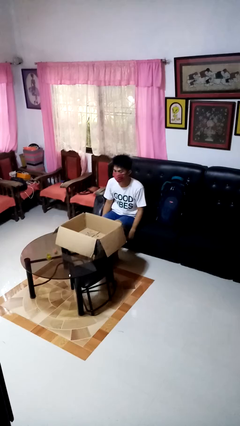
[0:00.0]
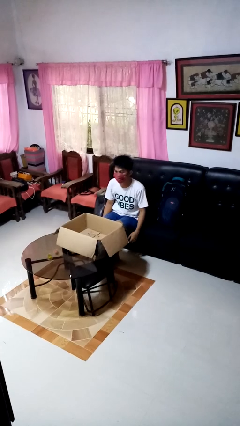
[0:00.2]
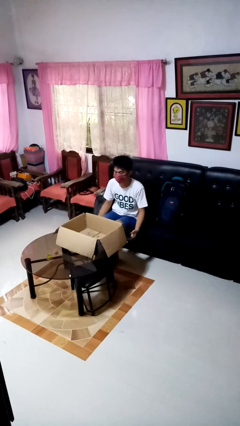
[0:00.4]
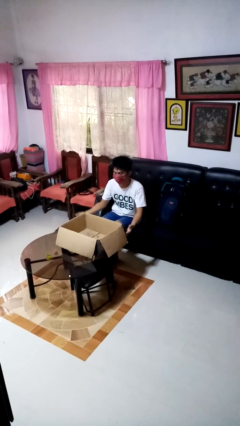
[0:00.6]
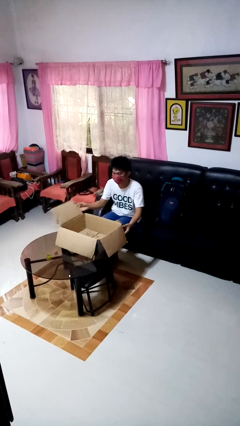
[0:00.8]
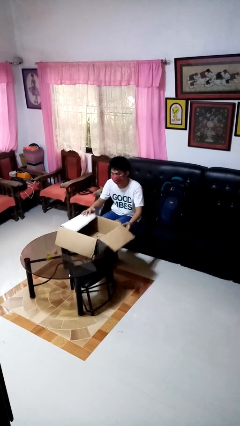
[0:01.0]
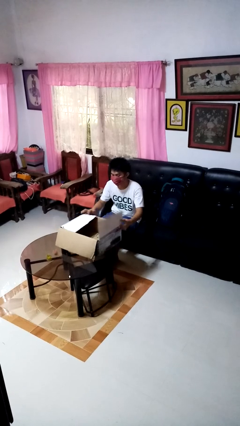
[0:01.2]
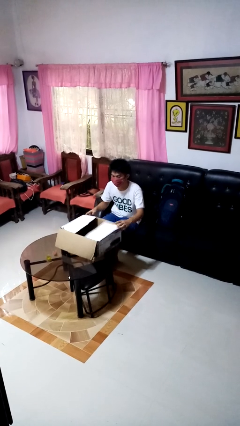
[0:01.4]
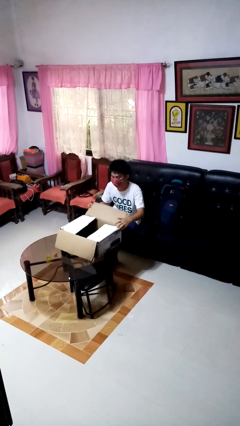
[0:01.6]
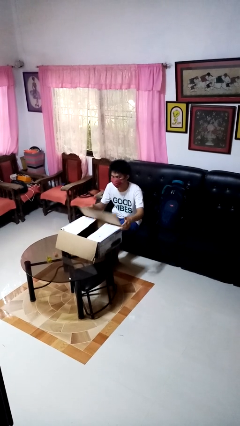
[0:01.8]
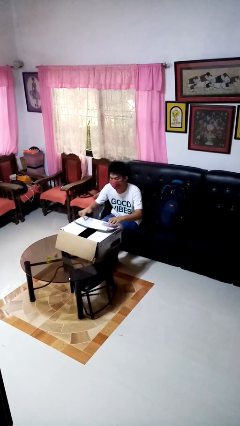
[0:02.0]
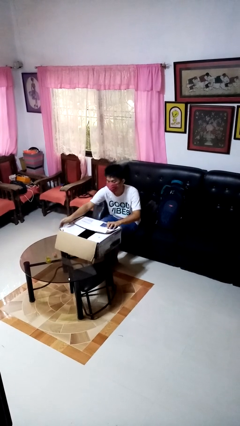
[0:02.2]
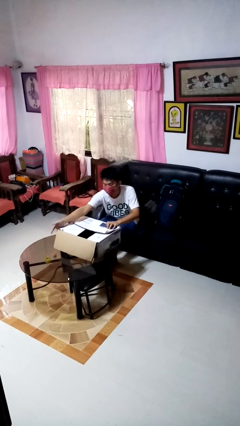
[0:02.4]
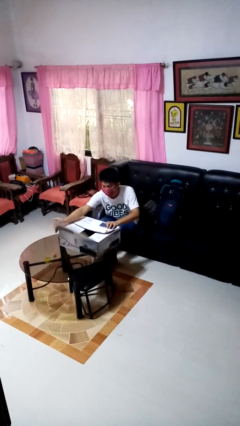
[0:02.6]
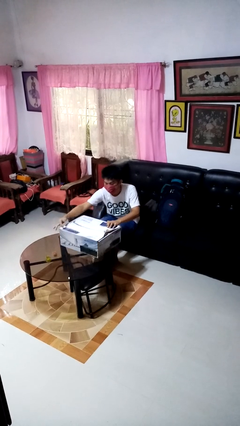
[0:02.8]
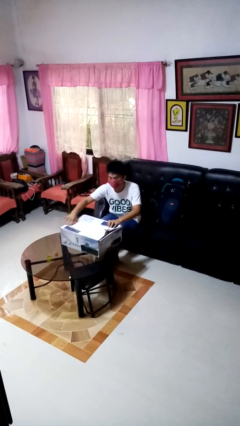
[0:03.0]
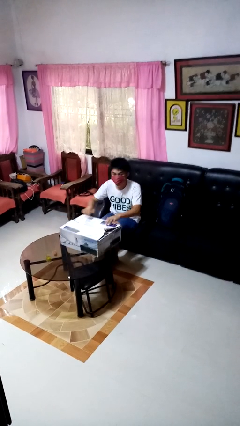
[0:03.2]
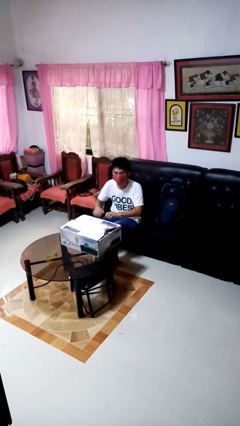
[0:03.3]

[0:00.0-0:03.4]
person closes box

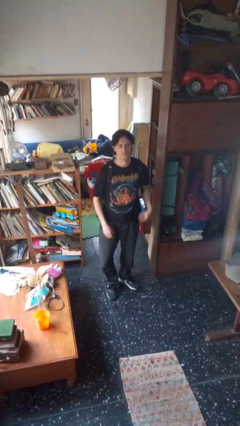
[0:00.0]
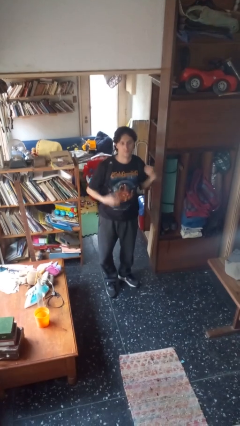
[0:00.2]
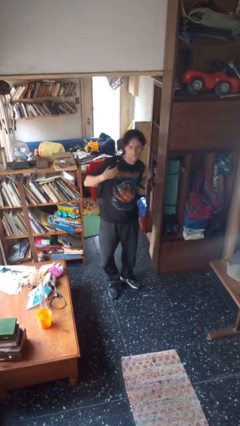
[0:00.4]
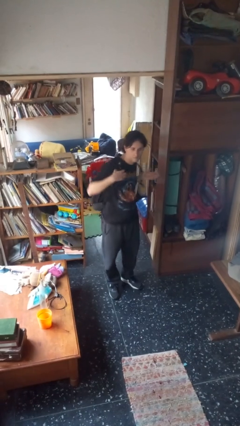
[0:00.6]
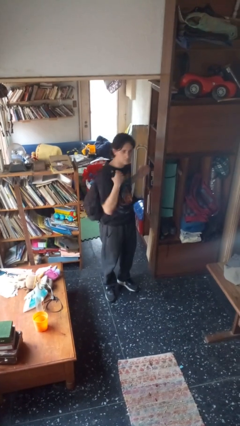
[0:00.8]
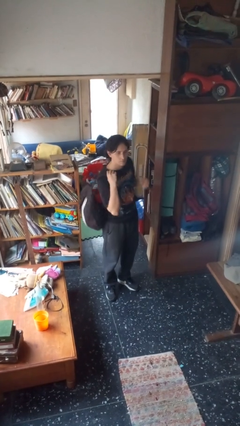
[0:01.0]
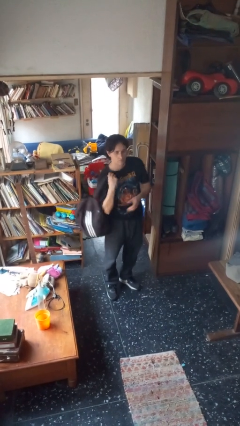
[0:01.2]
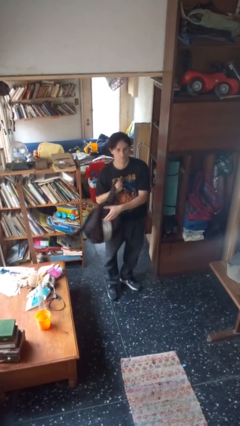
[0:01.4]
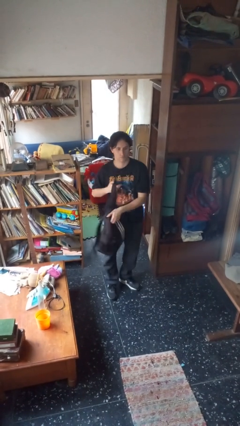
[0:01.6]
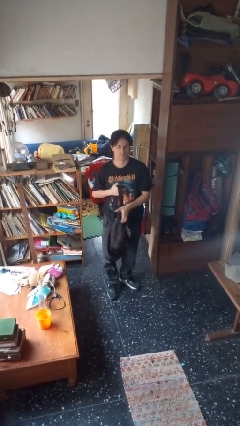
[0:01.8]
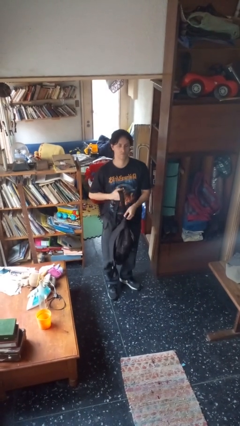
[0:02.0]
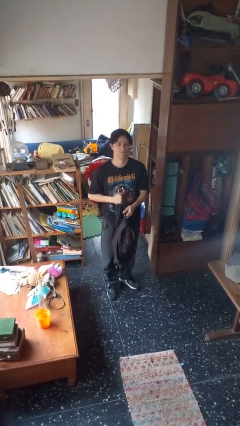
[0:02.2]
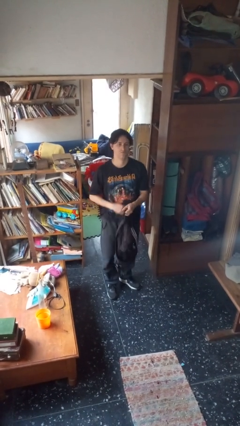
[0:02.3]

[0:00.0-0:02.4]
person takes off backpack

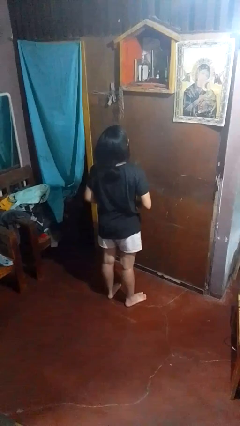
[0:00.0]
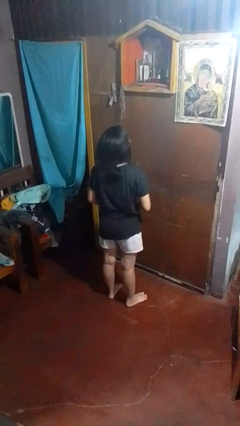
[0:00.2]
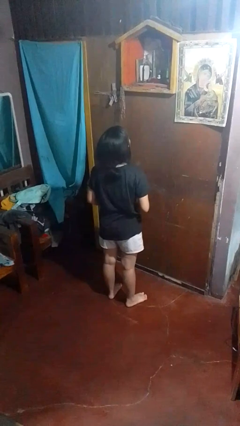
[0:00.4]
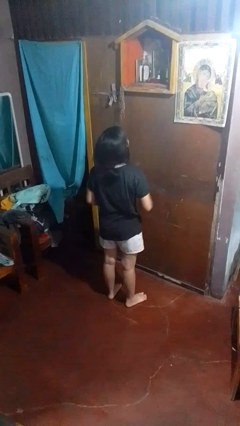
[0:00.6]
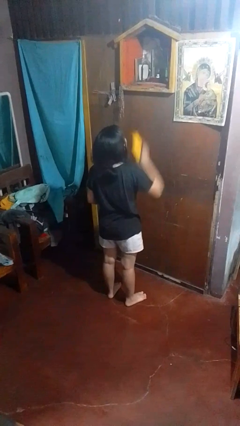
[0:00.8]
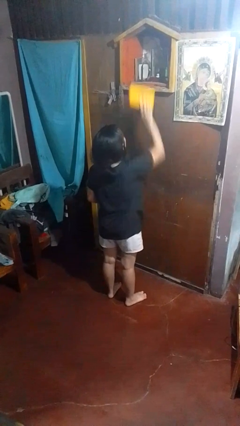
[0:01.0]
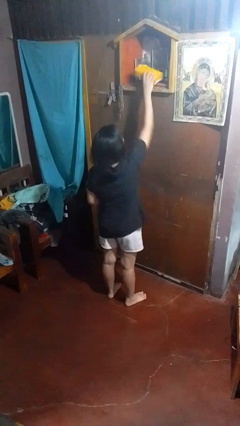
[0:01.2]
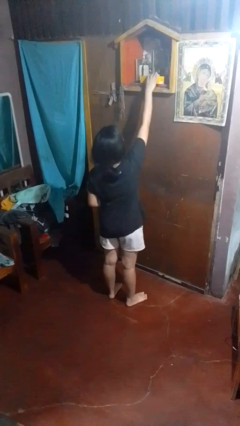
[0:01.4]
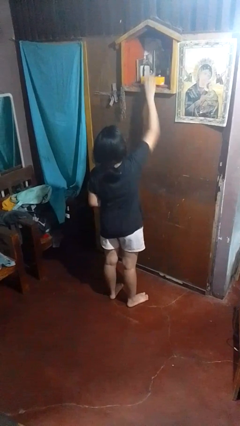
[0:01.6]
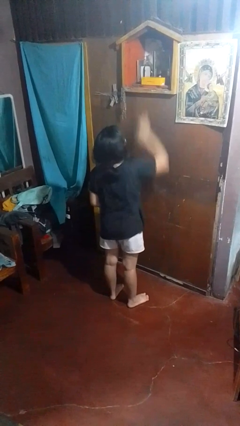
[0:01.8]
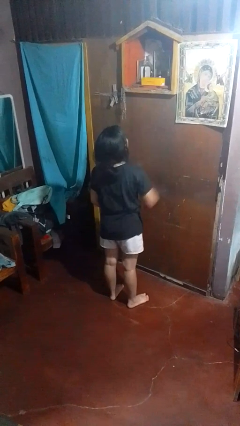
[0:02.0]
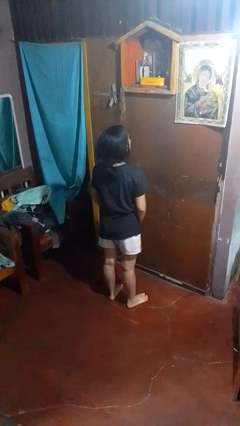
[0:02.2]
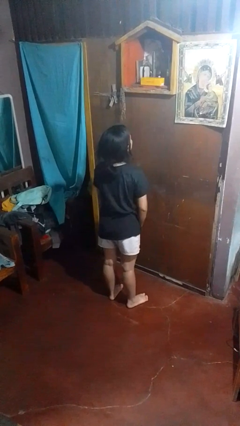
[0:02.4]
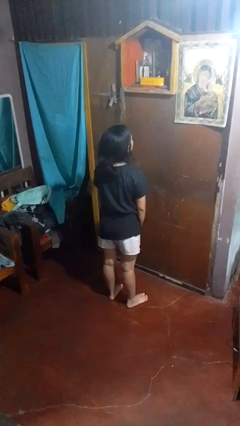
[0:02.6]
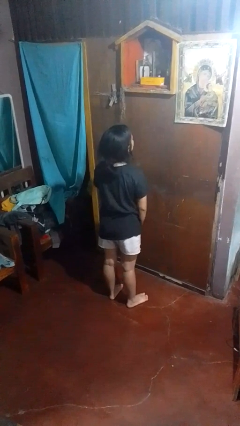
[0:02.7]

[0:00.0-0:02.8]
person puts down object on shelf

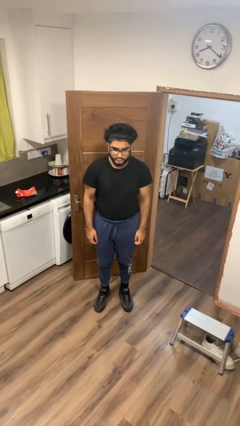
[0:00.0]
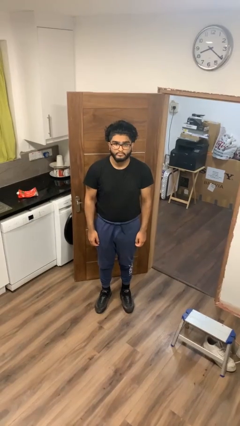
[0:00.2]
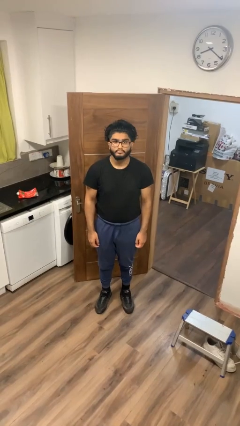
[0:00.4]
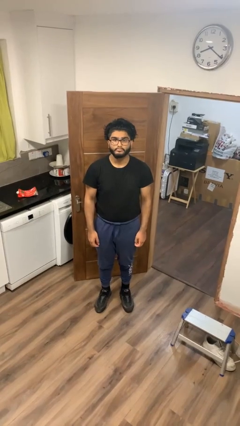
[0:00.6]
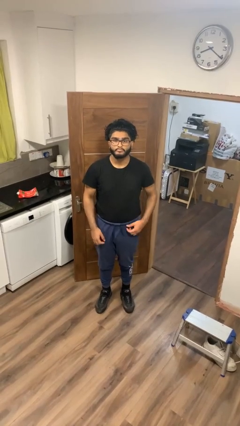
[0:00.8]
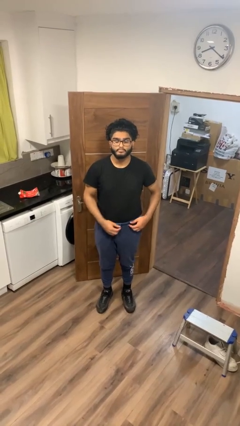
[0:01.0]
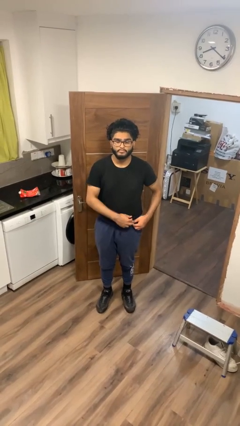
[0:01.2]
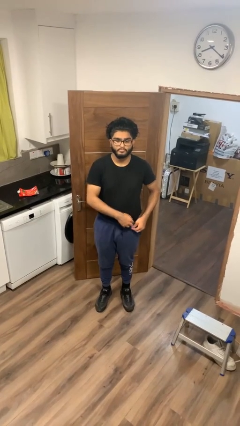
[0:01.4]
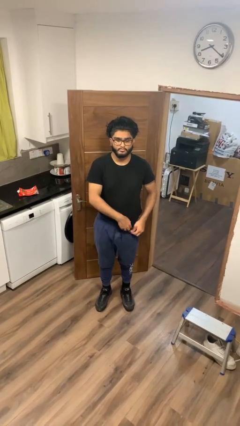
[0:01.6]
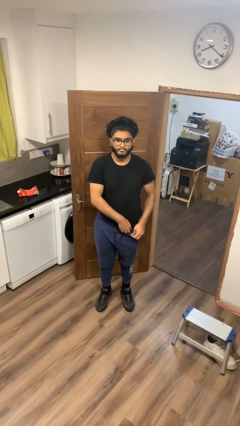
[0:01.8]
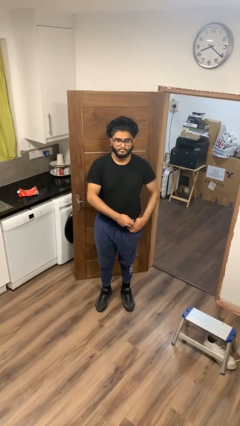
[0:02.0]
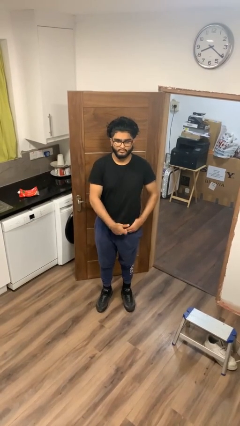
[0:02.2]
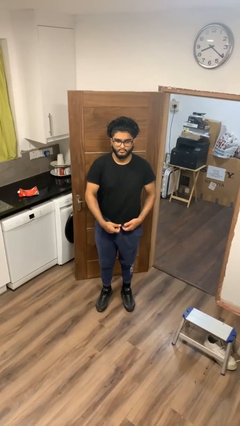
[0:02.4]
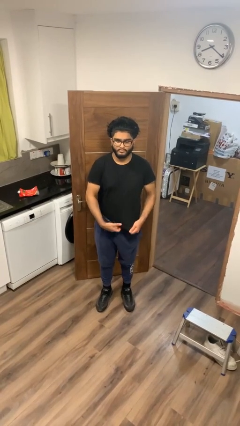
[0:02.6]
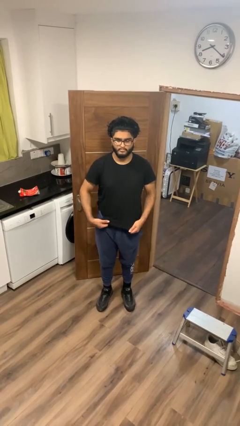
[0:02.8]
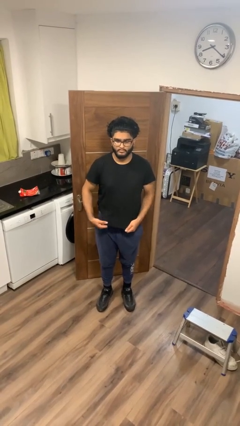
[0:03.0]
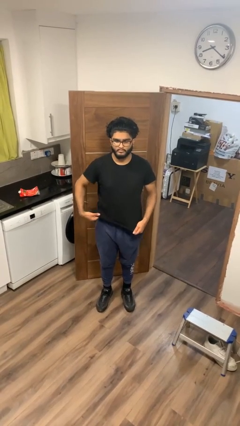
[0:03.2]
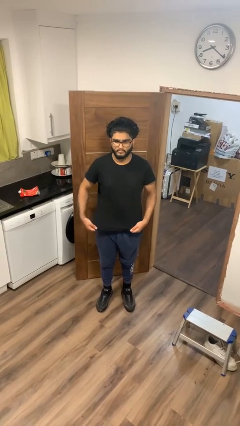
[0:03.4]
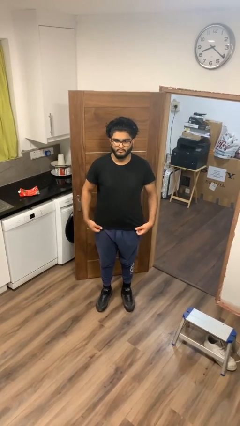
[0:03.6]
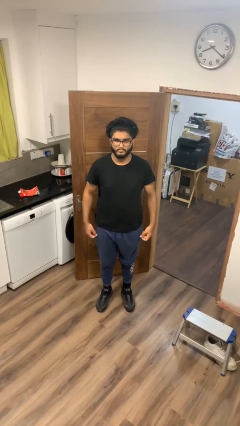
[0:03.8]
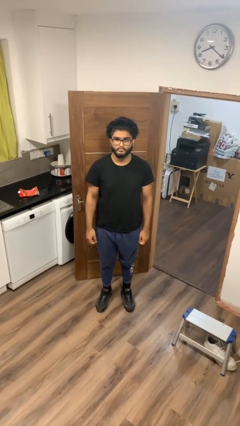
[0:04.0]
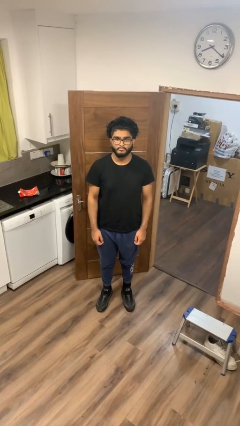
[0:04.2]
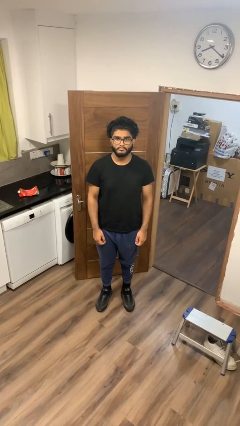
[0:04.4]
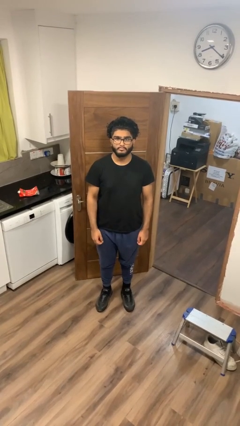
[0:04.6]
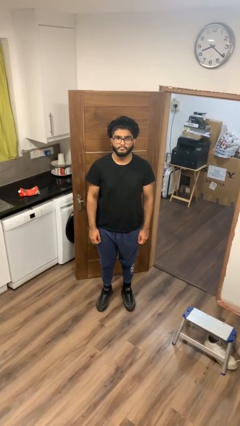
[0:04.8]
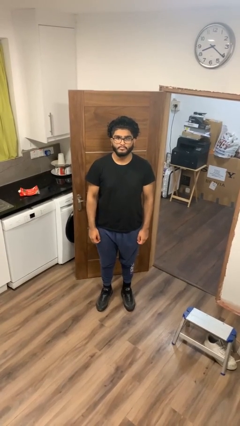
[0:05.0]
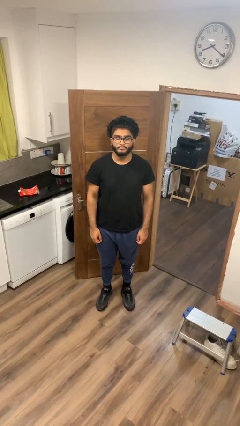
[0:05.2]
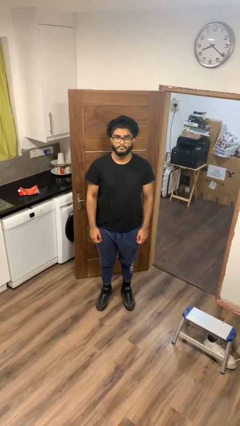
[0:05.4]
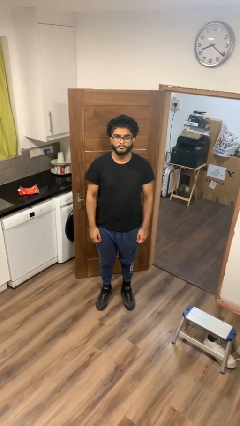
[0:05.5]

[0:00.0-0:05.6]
person untucks shirt

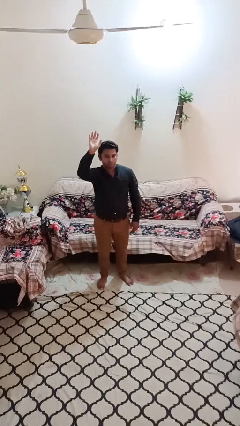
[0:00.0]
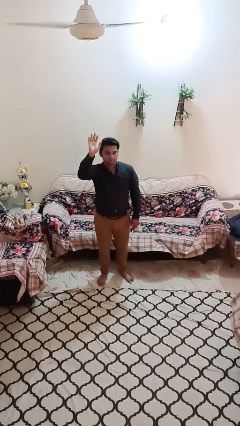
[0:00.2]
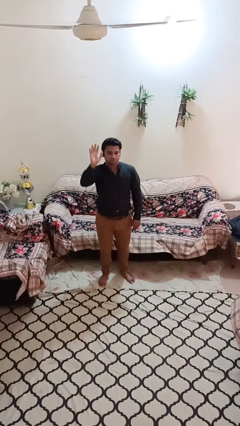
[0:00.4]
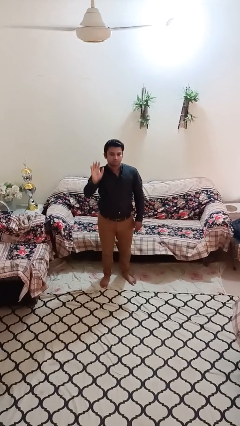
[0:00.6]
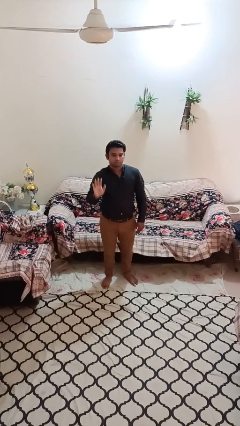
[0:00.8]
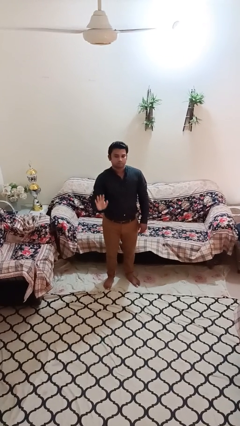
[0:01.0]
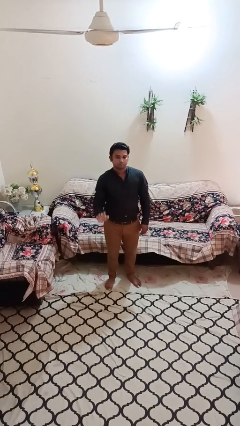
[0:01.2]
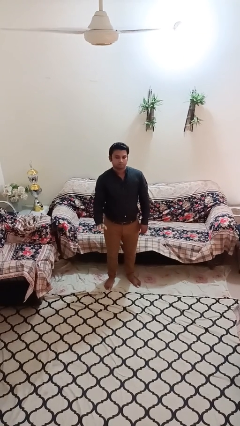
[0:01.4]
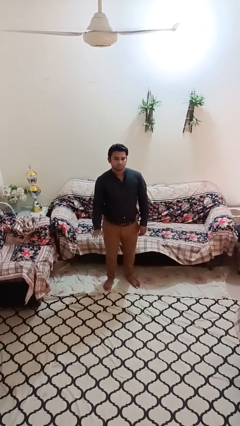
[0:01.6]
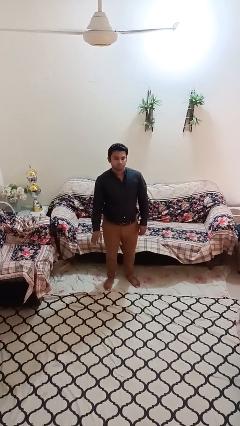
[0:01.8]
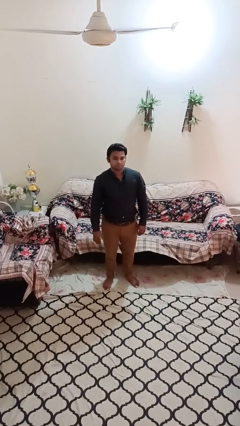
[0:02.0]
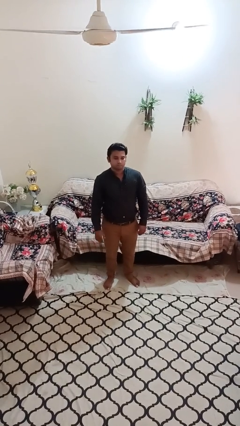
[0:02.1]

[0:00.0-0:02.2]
person gestures lower hand

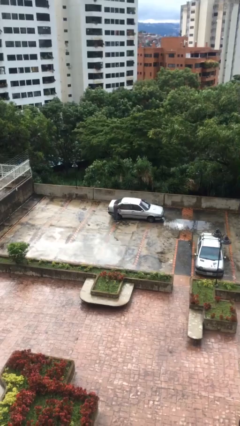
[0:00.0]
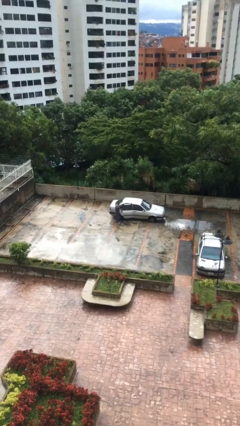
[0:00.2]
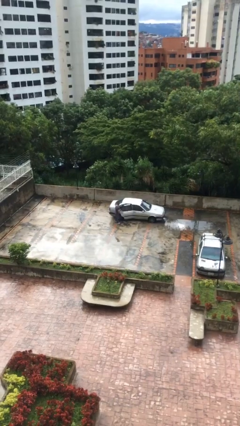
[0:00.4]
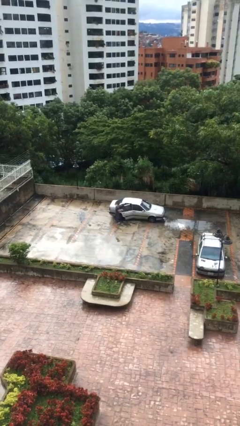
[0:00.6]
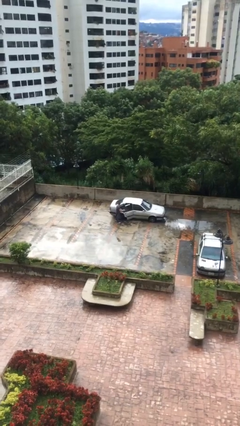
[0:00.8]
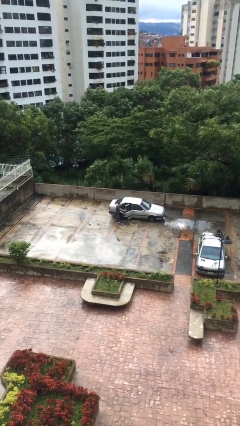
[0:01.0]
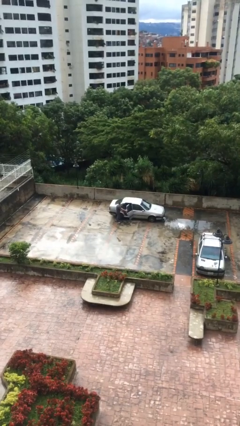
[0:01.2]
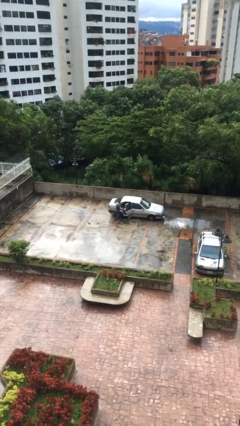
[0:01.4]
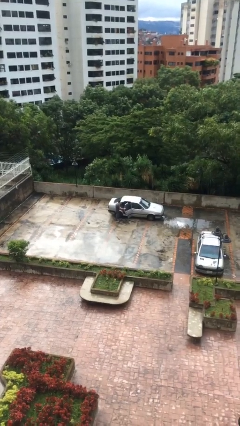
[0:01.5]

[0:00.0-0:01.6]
person opens car door
